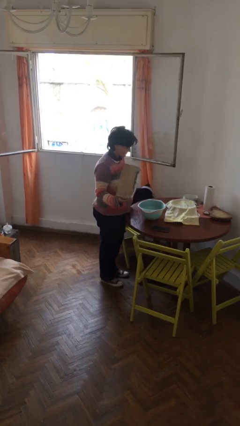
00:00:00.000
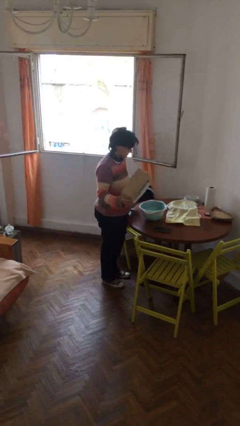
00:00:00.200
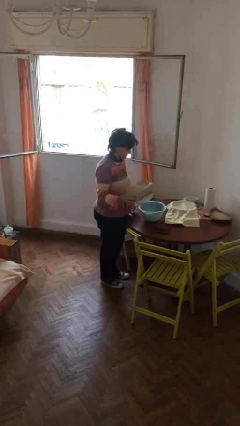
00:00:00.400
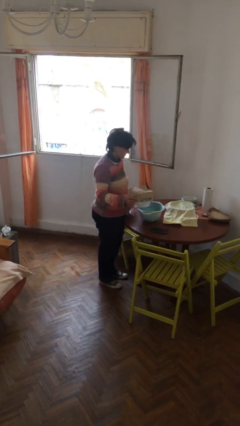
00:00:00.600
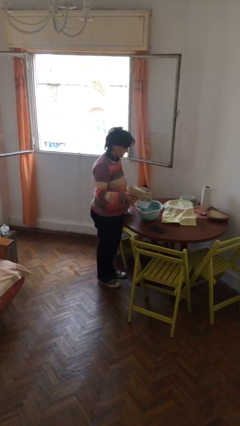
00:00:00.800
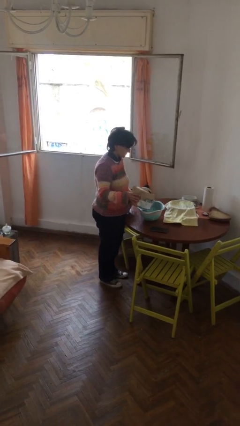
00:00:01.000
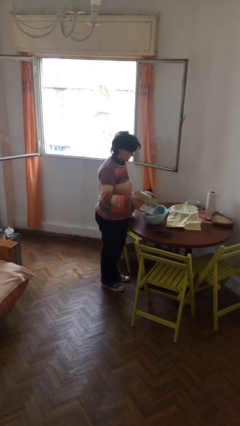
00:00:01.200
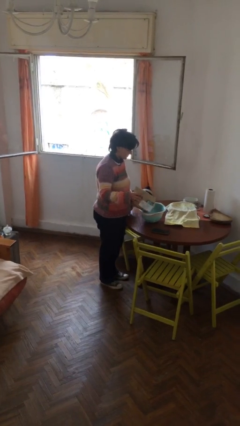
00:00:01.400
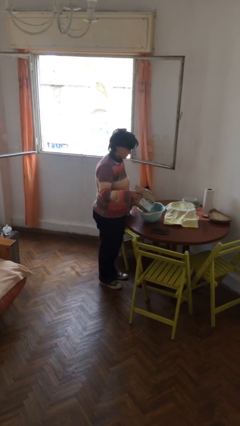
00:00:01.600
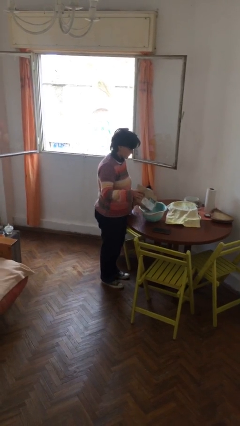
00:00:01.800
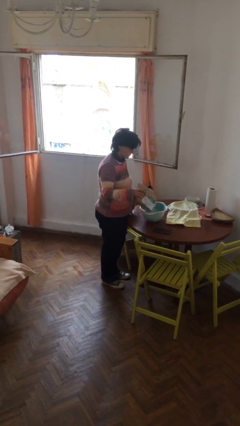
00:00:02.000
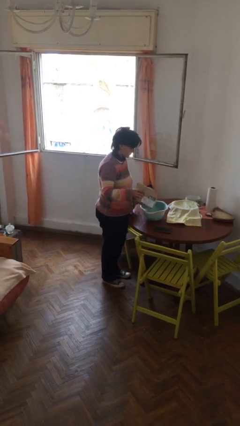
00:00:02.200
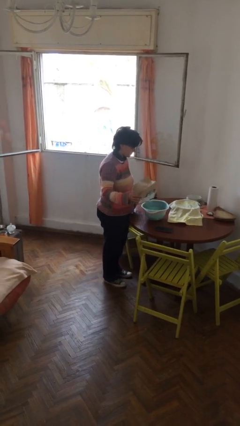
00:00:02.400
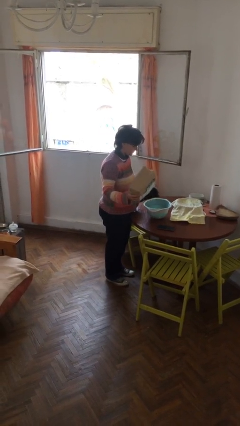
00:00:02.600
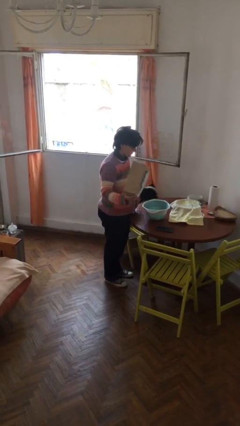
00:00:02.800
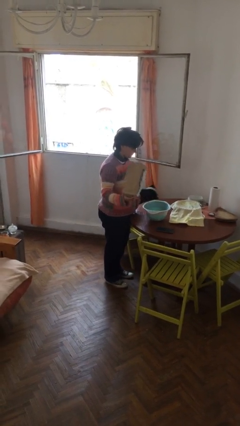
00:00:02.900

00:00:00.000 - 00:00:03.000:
person pours into bowl

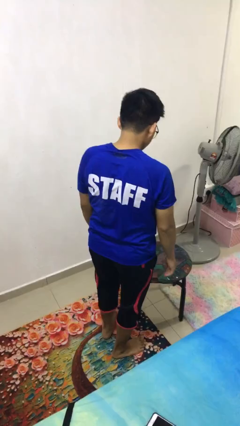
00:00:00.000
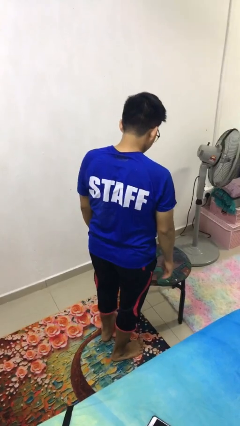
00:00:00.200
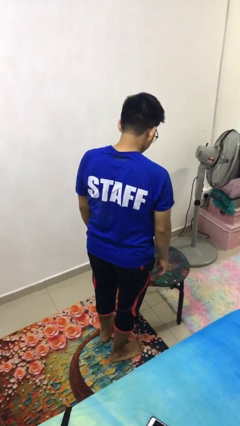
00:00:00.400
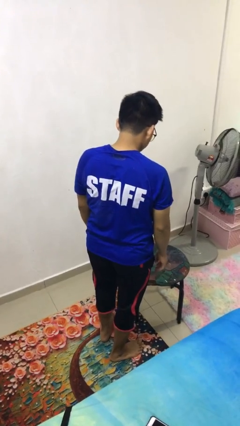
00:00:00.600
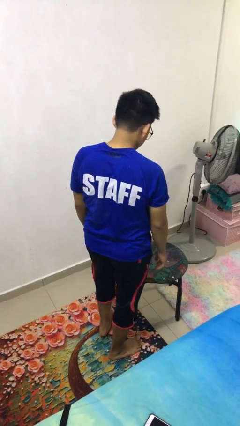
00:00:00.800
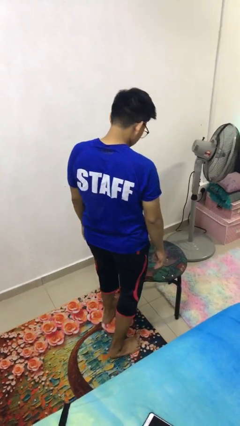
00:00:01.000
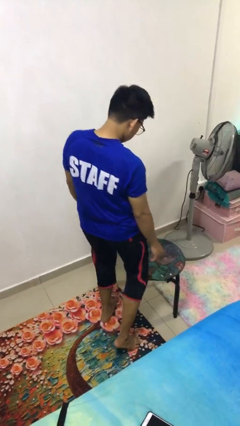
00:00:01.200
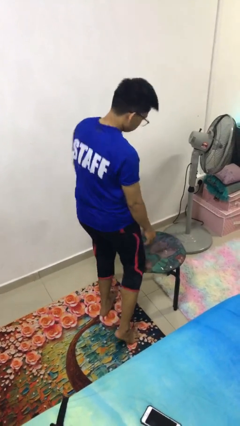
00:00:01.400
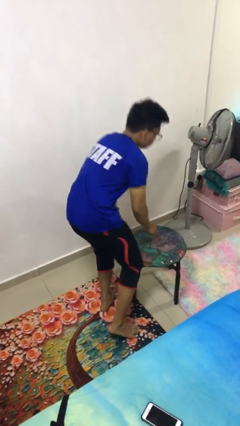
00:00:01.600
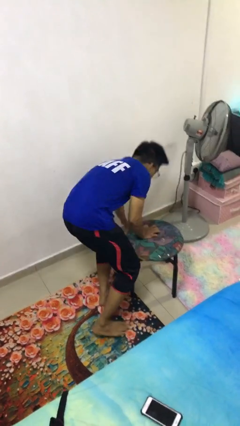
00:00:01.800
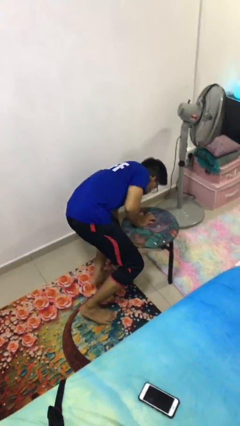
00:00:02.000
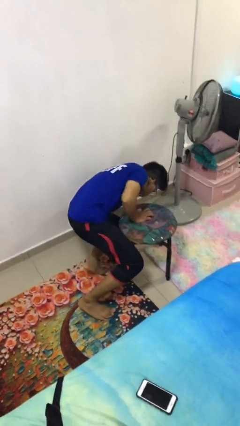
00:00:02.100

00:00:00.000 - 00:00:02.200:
person trips on object on floor

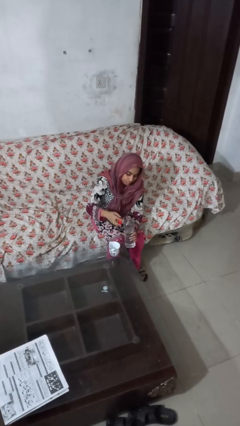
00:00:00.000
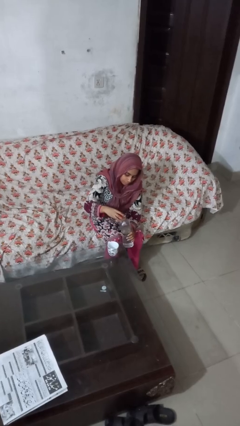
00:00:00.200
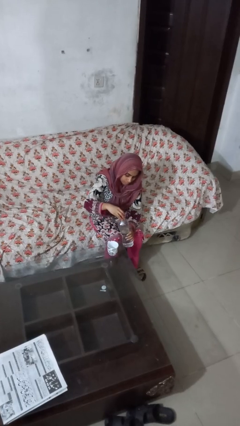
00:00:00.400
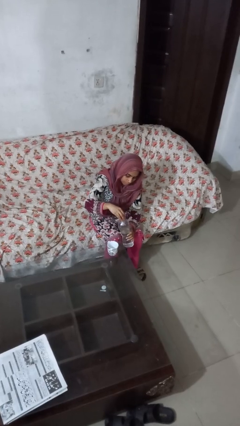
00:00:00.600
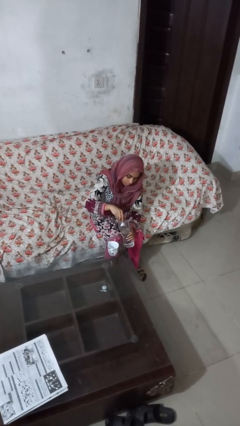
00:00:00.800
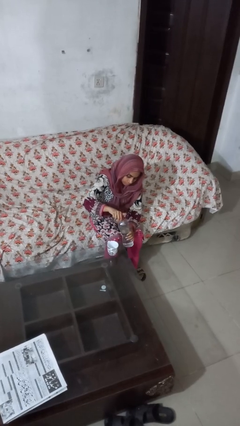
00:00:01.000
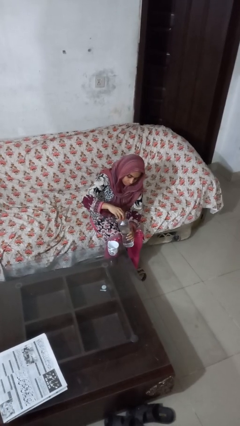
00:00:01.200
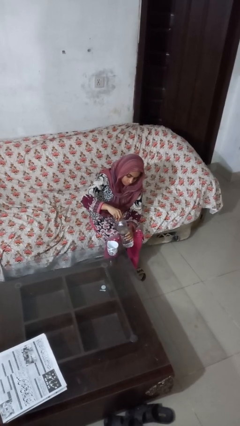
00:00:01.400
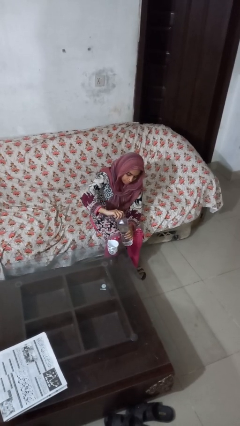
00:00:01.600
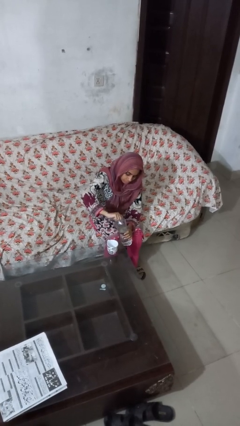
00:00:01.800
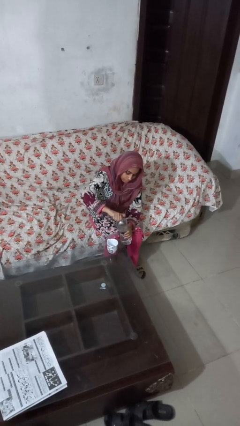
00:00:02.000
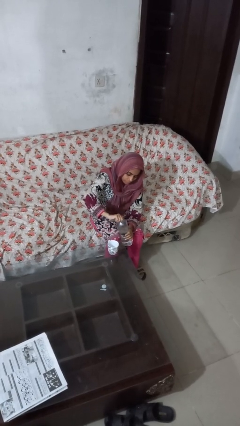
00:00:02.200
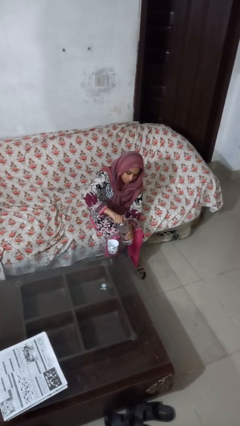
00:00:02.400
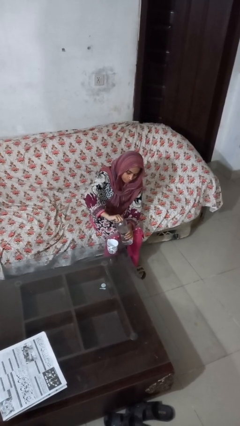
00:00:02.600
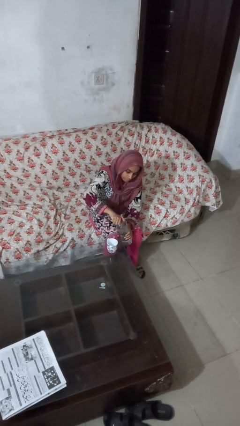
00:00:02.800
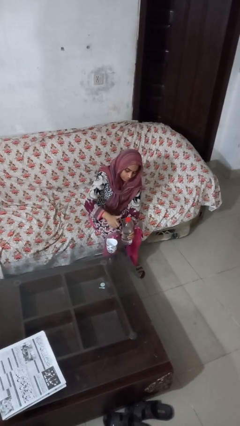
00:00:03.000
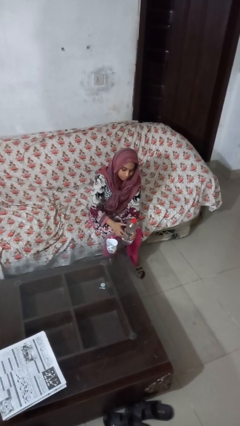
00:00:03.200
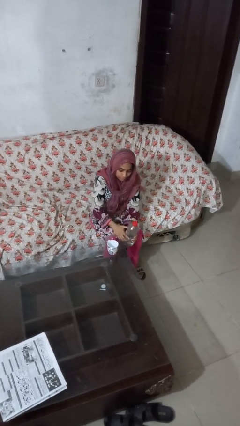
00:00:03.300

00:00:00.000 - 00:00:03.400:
person screws lid to bottle

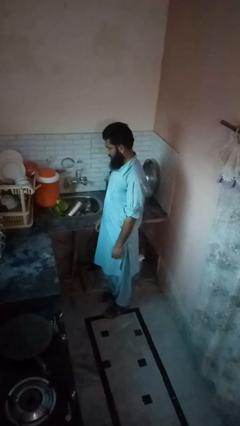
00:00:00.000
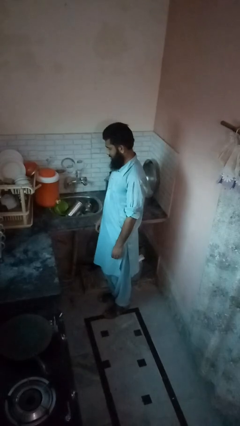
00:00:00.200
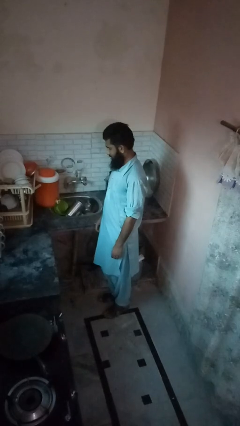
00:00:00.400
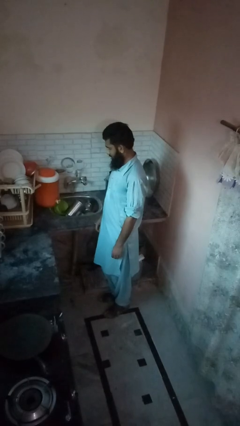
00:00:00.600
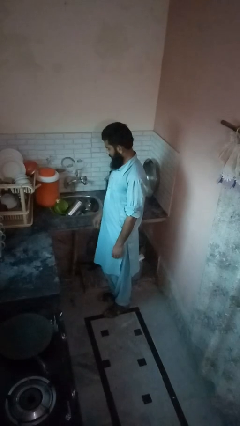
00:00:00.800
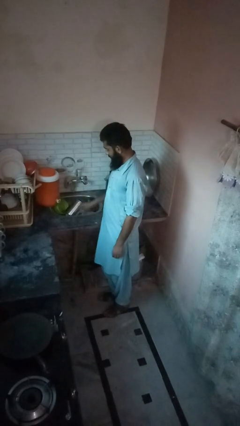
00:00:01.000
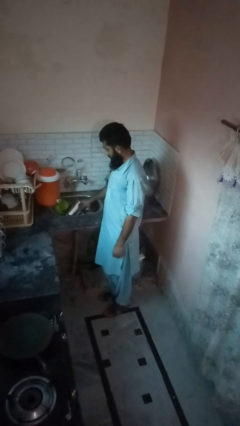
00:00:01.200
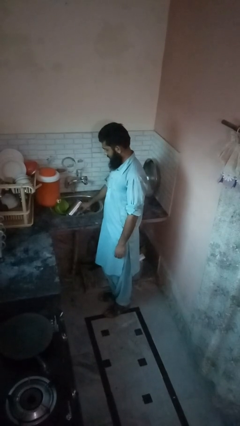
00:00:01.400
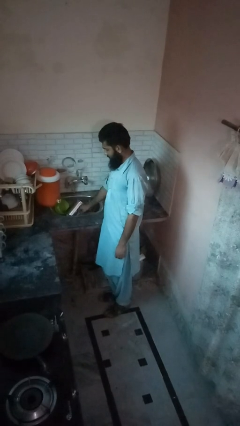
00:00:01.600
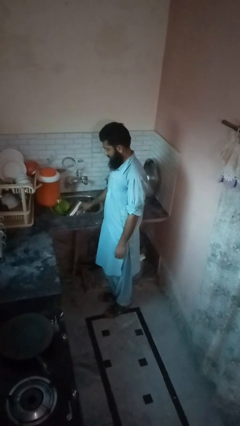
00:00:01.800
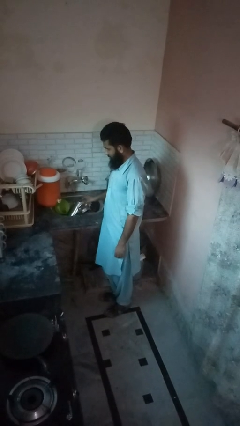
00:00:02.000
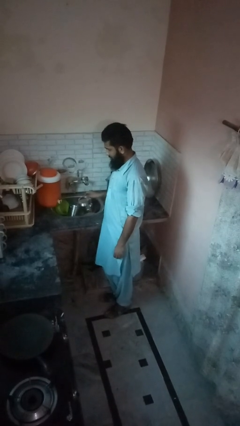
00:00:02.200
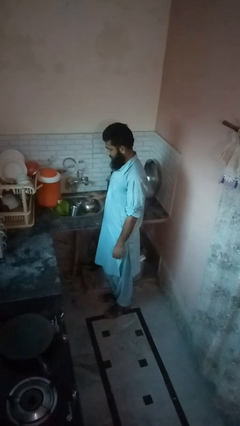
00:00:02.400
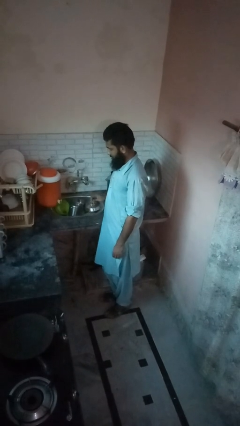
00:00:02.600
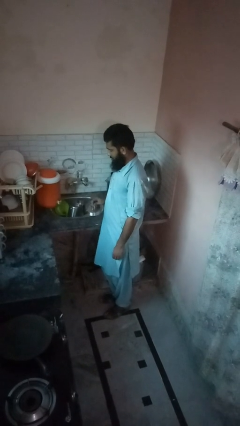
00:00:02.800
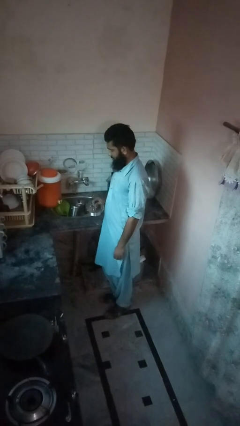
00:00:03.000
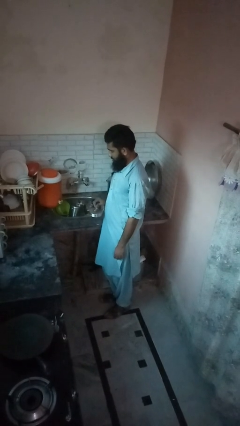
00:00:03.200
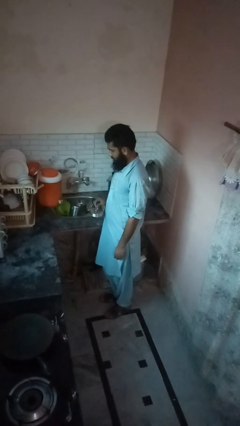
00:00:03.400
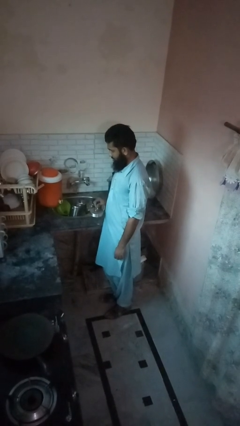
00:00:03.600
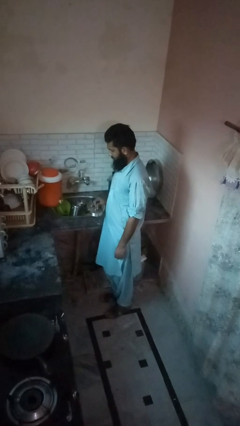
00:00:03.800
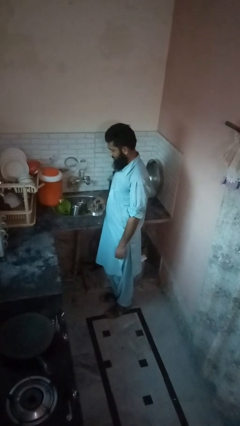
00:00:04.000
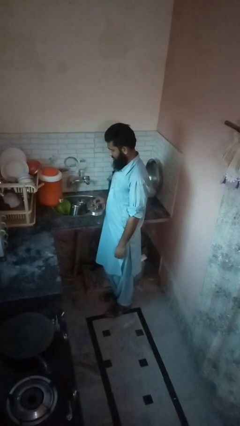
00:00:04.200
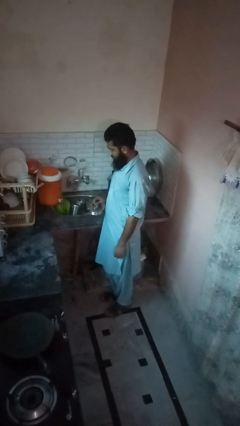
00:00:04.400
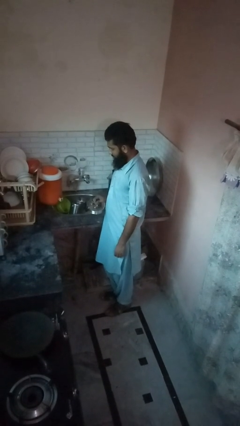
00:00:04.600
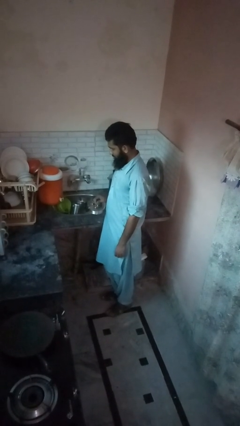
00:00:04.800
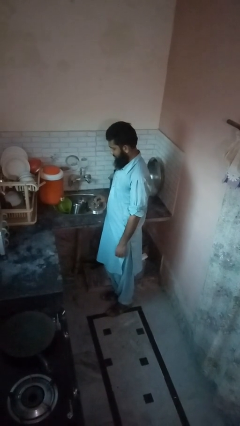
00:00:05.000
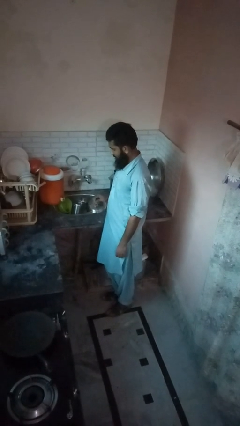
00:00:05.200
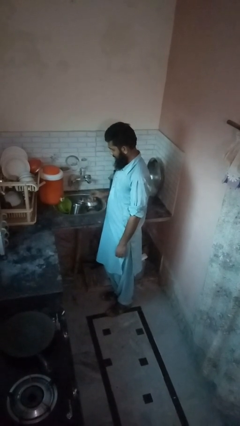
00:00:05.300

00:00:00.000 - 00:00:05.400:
person picks up object from countertop

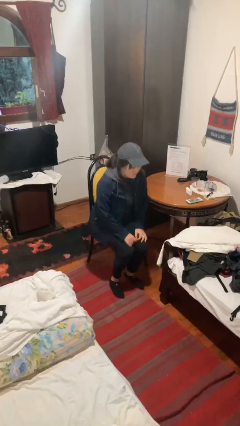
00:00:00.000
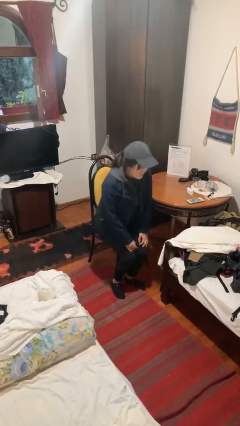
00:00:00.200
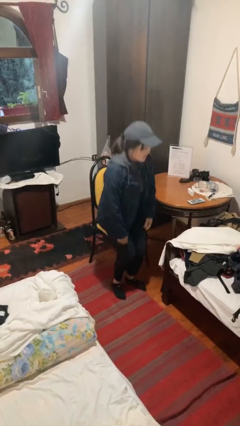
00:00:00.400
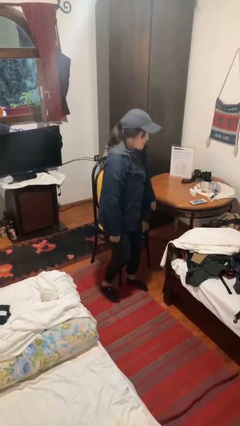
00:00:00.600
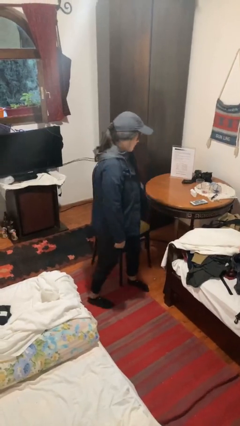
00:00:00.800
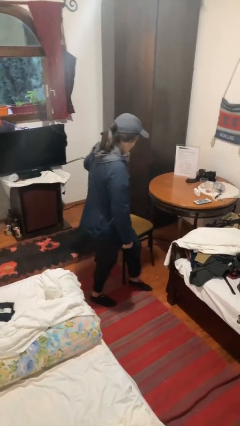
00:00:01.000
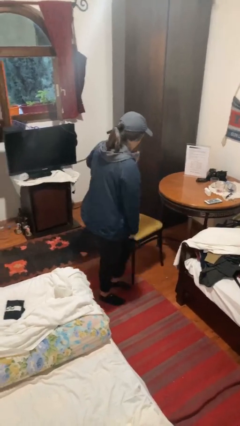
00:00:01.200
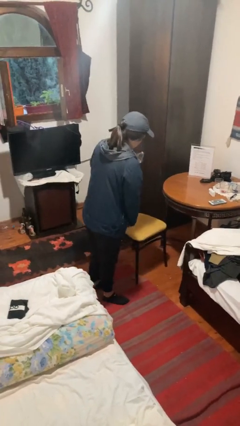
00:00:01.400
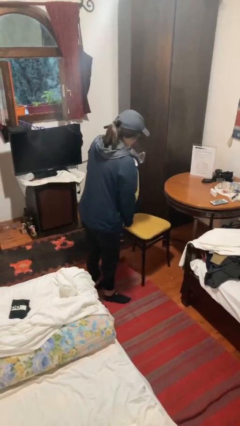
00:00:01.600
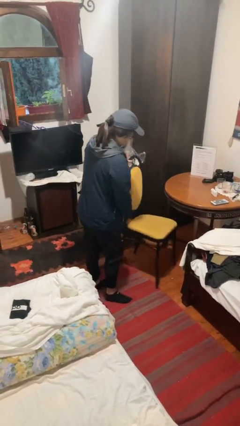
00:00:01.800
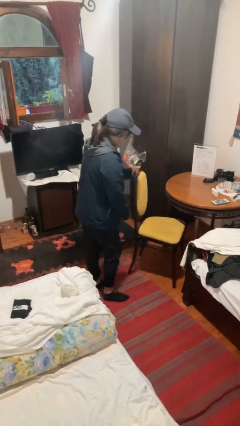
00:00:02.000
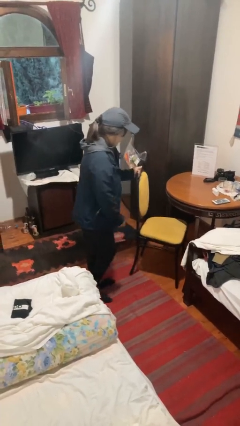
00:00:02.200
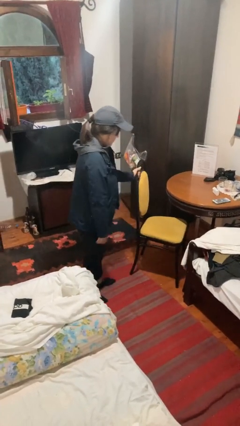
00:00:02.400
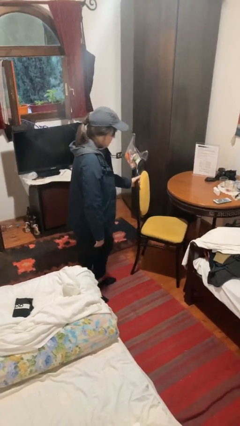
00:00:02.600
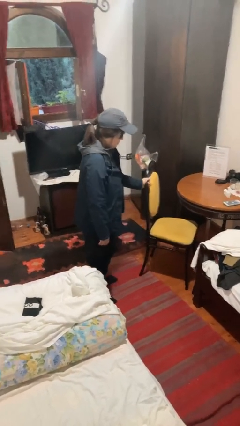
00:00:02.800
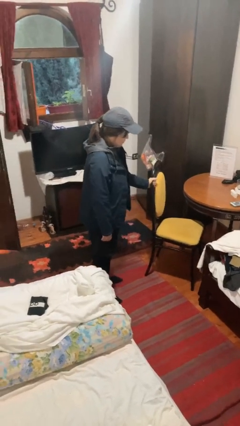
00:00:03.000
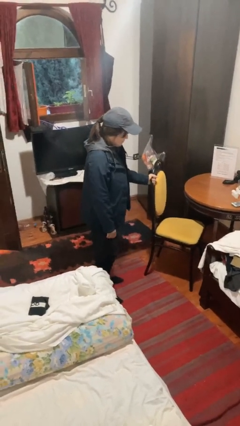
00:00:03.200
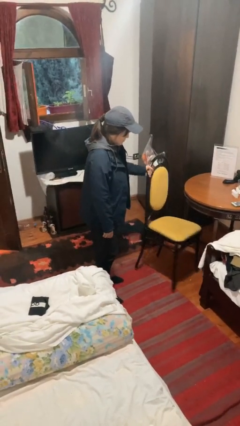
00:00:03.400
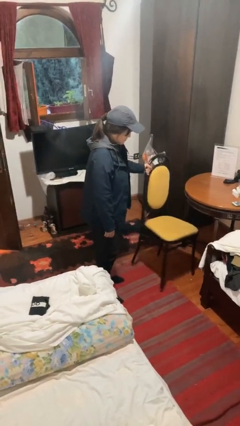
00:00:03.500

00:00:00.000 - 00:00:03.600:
person stands up
